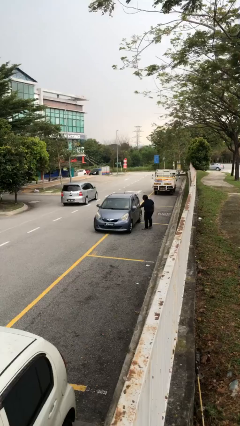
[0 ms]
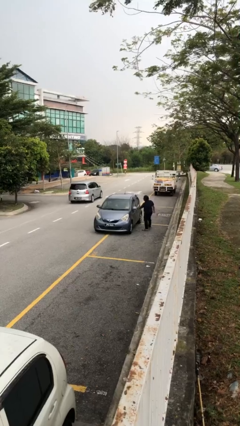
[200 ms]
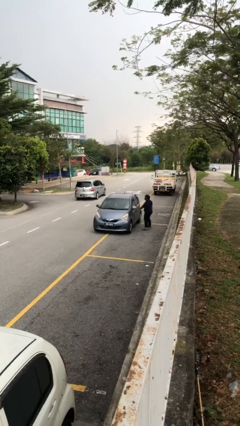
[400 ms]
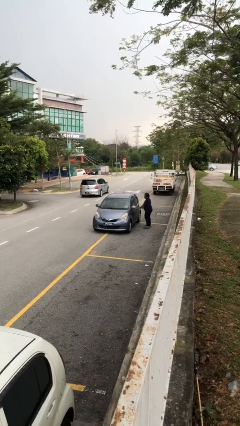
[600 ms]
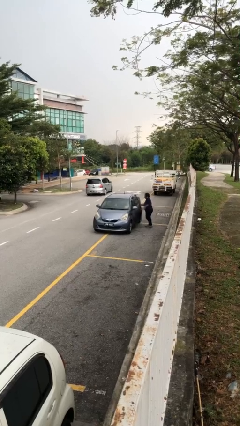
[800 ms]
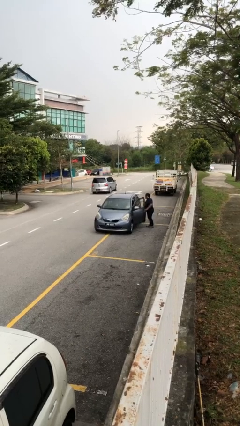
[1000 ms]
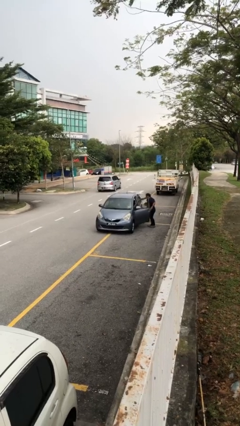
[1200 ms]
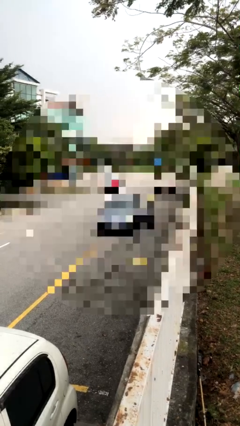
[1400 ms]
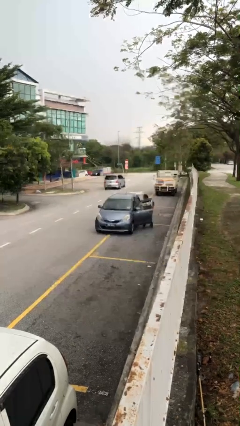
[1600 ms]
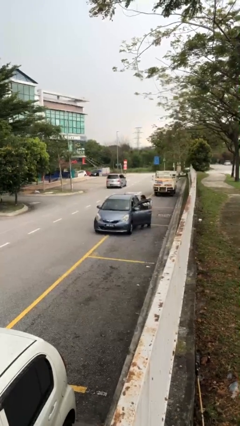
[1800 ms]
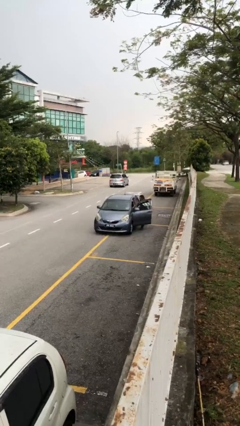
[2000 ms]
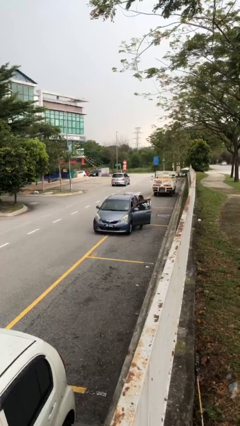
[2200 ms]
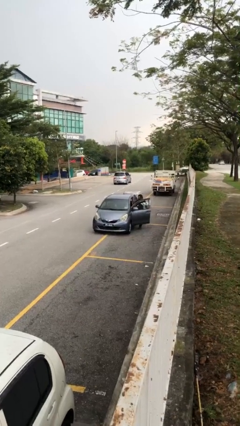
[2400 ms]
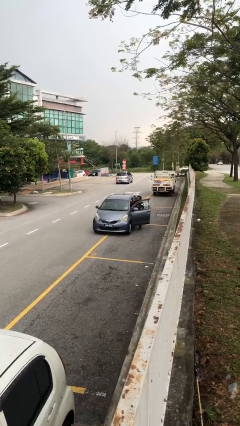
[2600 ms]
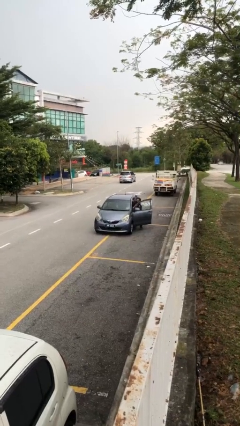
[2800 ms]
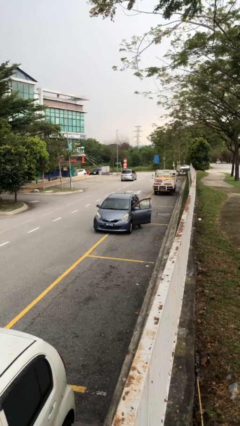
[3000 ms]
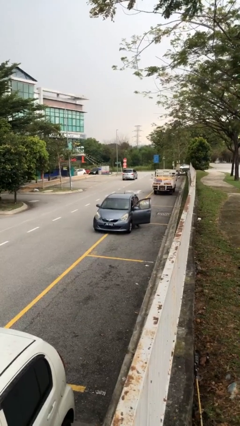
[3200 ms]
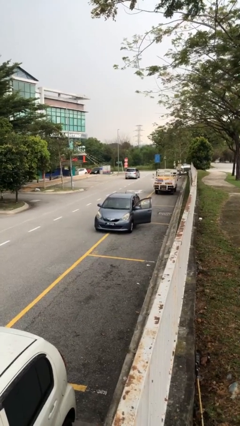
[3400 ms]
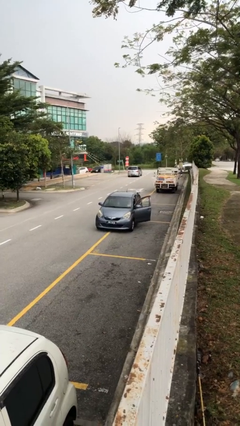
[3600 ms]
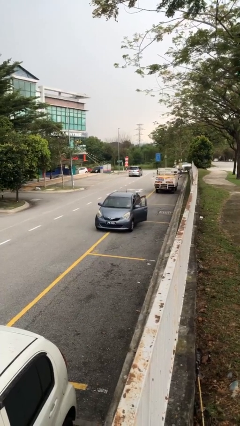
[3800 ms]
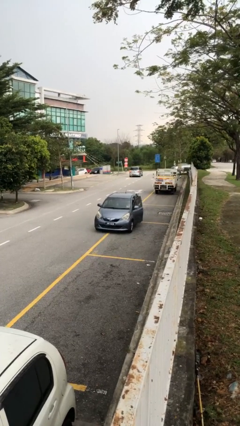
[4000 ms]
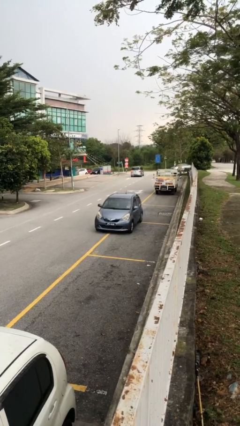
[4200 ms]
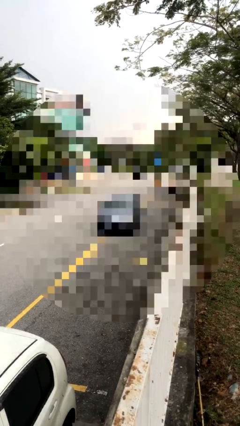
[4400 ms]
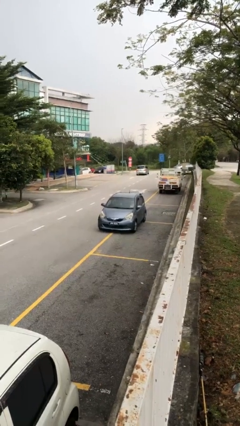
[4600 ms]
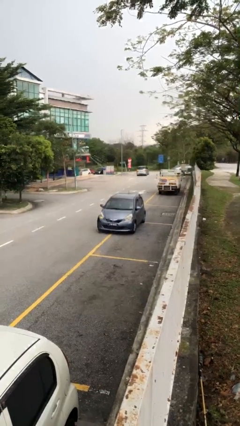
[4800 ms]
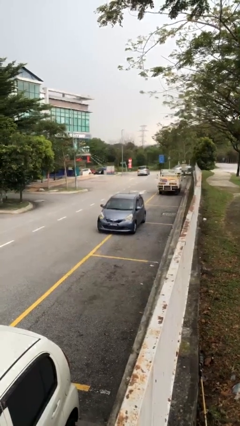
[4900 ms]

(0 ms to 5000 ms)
car picks up person

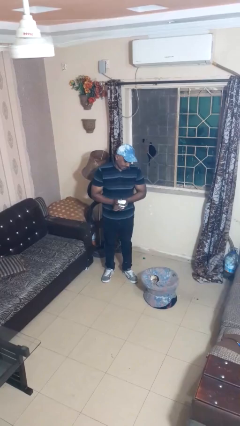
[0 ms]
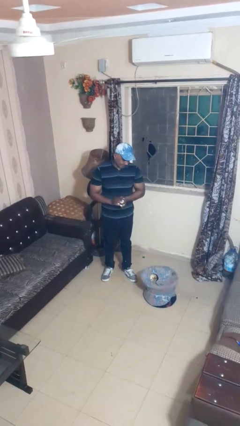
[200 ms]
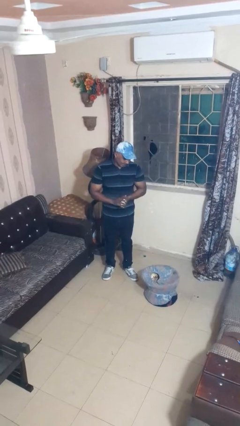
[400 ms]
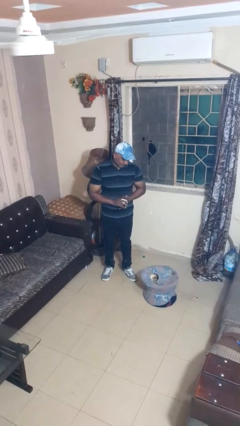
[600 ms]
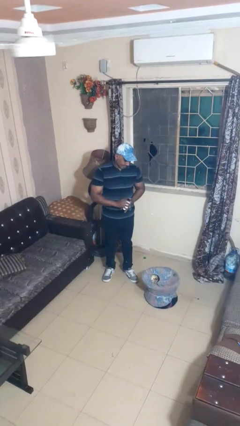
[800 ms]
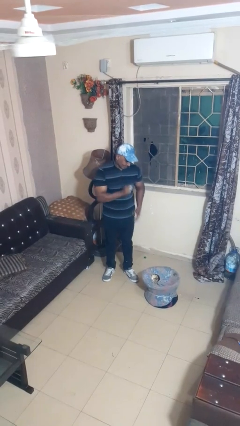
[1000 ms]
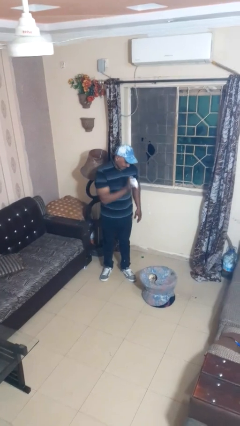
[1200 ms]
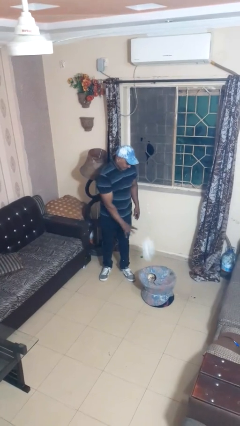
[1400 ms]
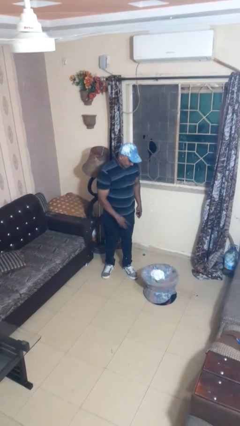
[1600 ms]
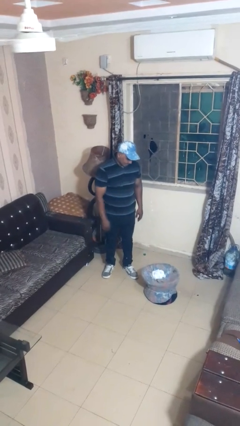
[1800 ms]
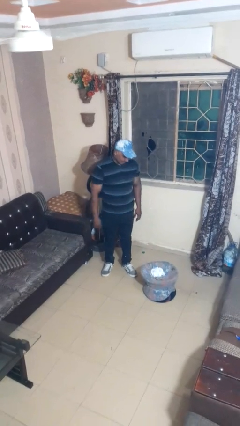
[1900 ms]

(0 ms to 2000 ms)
person puts object into basket

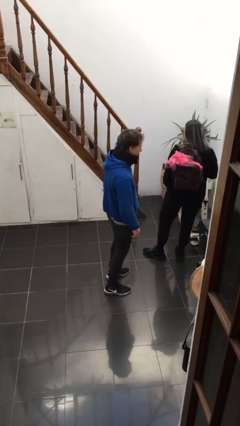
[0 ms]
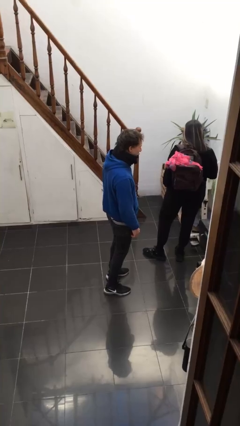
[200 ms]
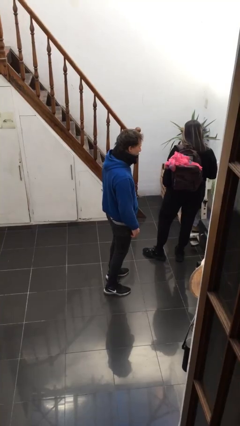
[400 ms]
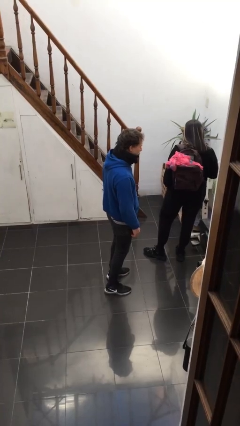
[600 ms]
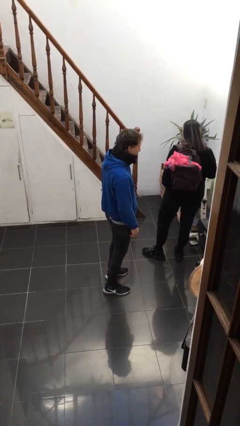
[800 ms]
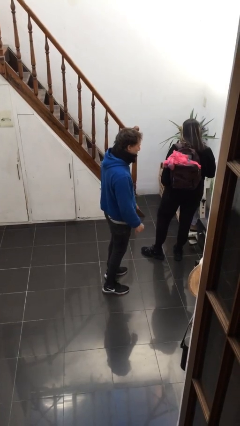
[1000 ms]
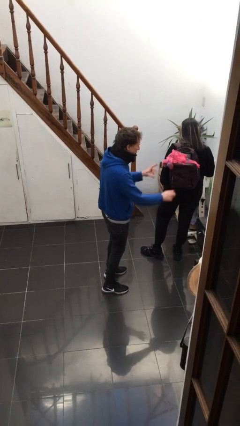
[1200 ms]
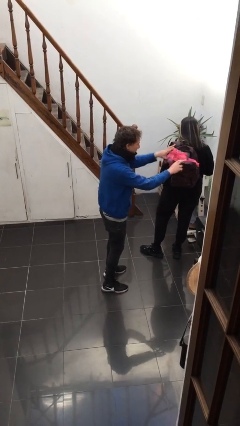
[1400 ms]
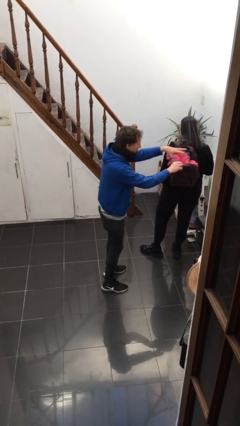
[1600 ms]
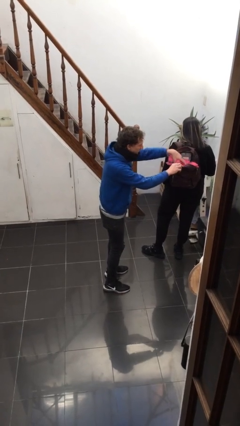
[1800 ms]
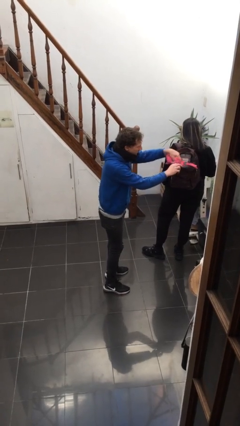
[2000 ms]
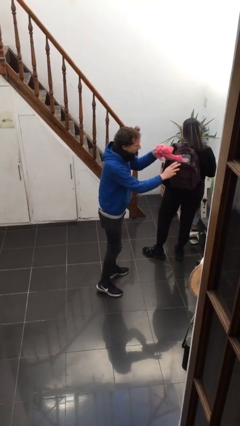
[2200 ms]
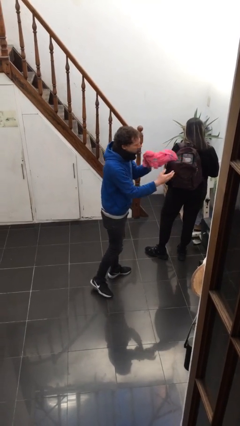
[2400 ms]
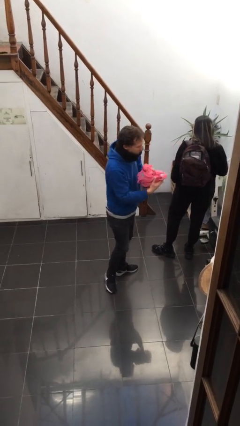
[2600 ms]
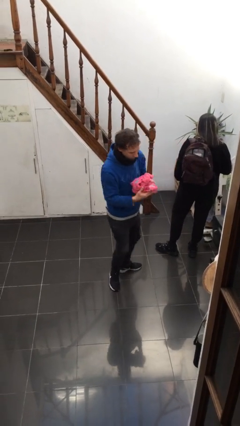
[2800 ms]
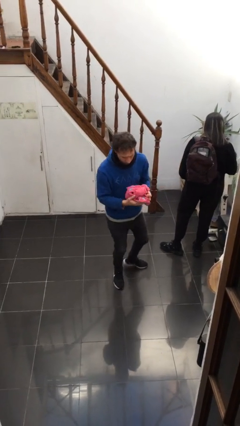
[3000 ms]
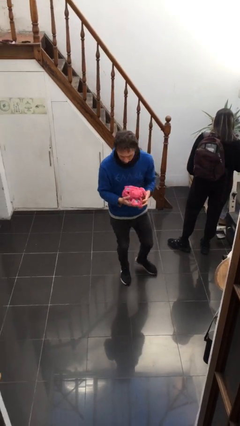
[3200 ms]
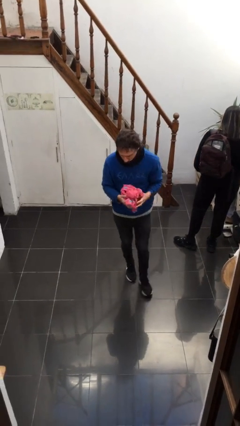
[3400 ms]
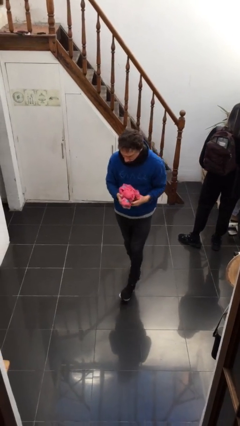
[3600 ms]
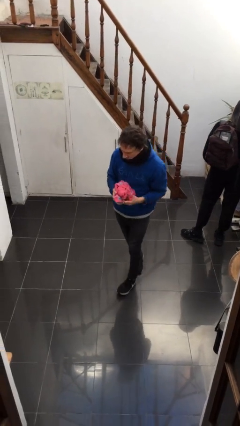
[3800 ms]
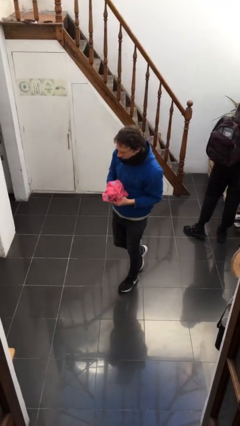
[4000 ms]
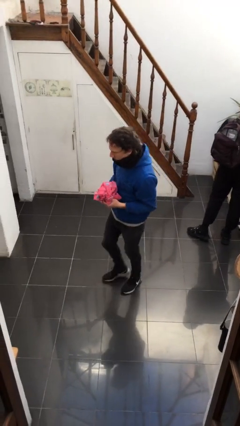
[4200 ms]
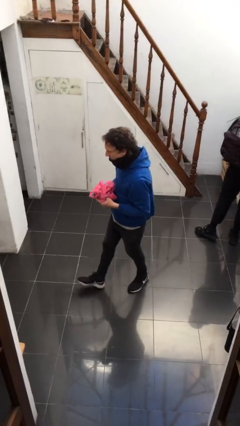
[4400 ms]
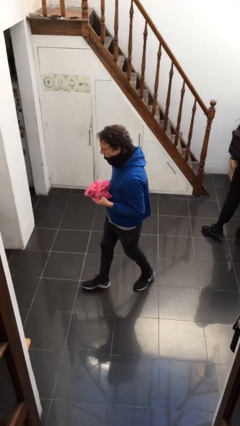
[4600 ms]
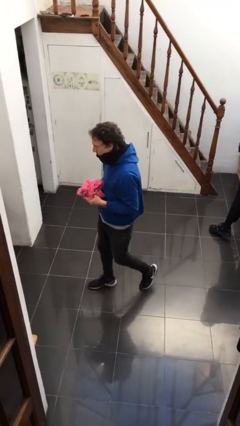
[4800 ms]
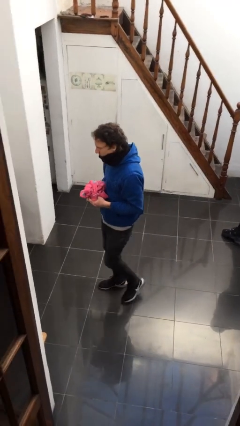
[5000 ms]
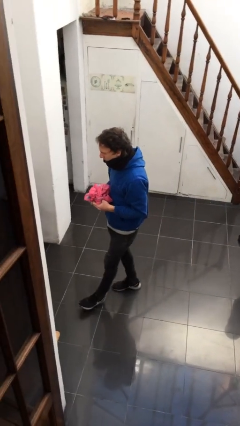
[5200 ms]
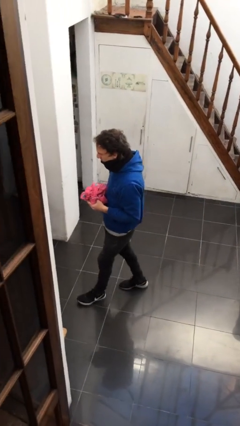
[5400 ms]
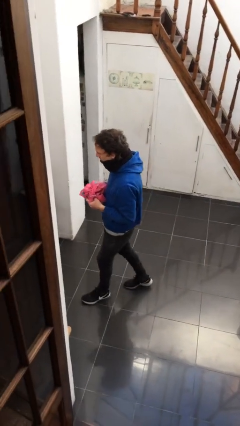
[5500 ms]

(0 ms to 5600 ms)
person steals object from person

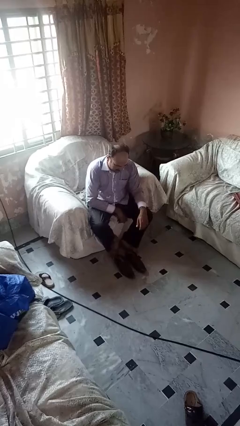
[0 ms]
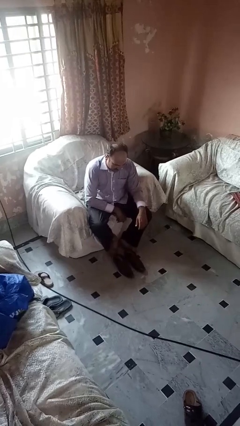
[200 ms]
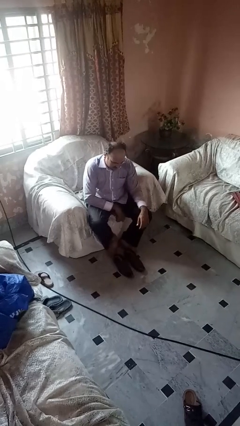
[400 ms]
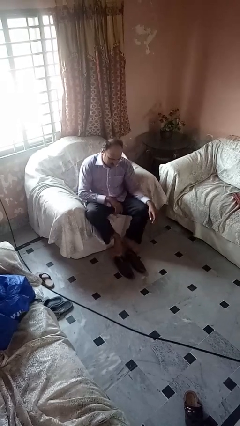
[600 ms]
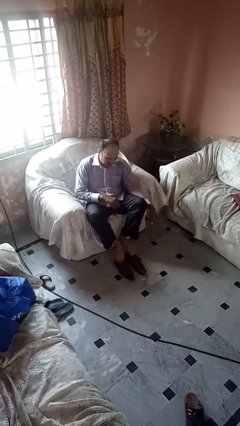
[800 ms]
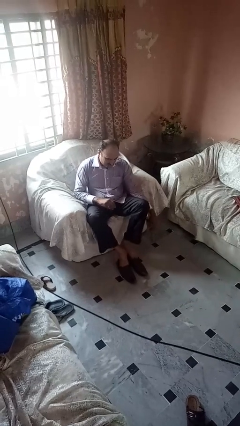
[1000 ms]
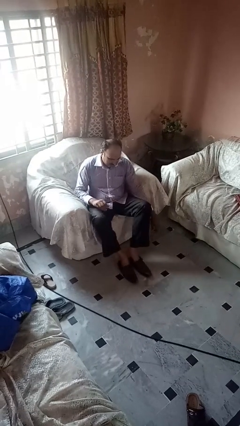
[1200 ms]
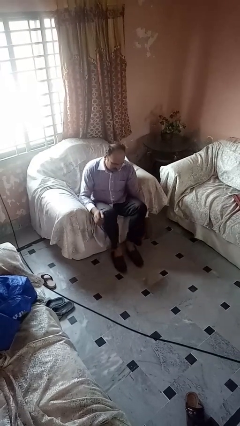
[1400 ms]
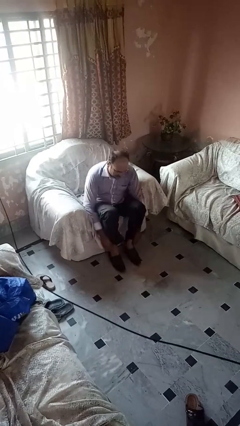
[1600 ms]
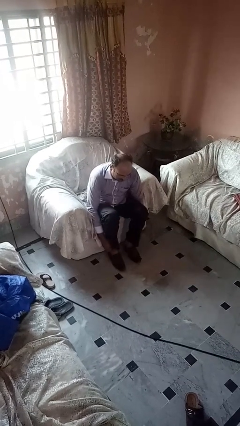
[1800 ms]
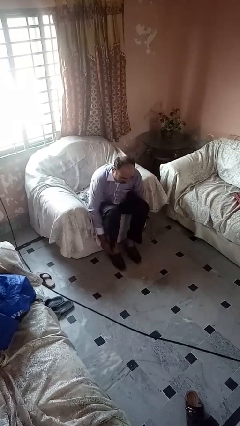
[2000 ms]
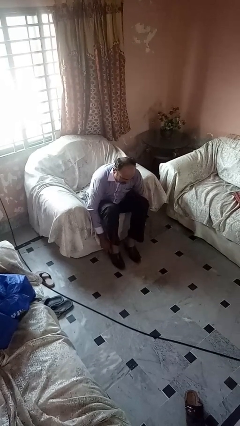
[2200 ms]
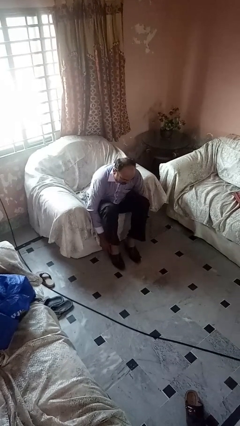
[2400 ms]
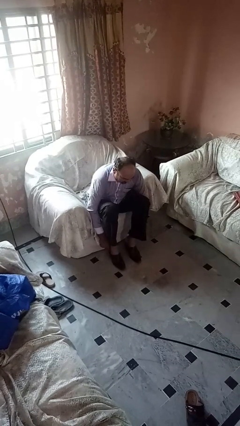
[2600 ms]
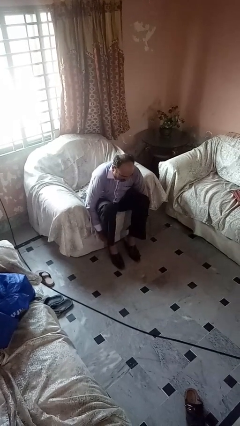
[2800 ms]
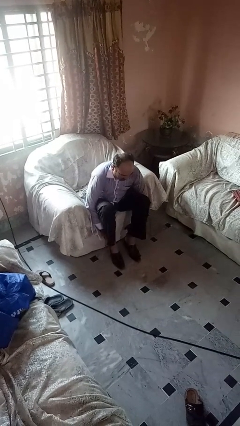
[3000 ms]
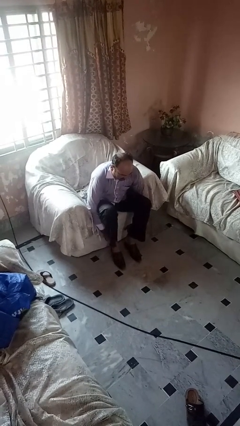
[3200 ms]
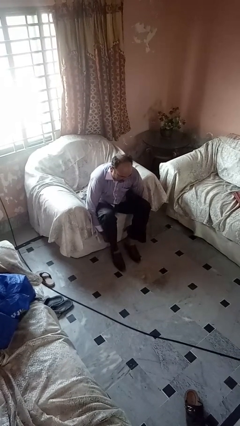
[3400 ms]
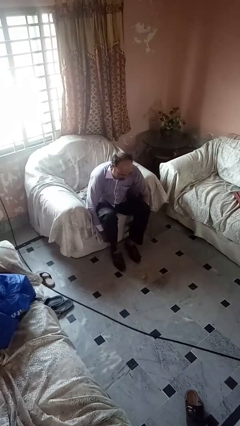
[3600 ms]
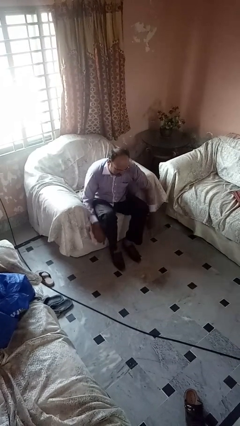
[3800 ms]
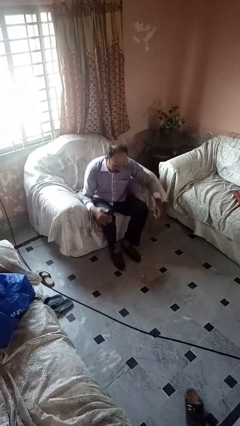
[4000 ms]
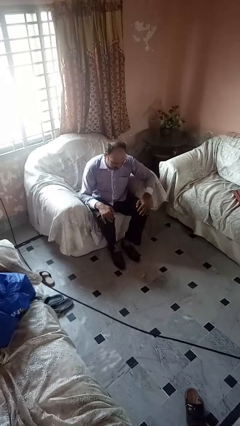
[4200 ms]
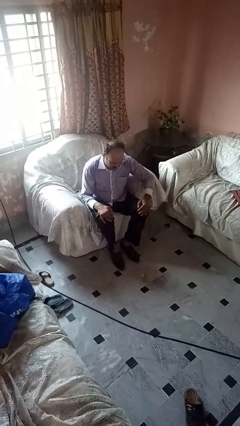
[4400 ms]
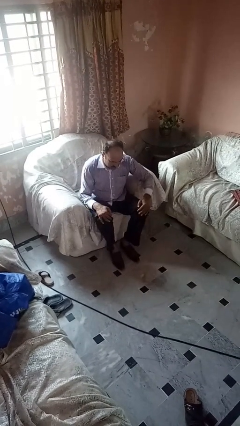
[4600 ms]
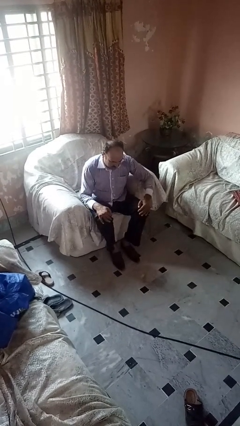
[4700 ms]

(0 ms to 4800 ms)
person puts on boots

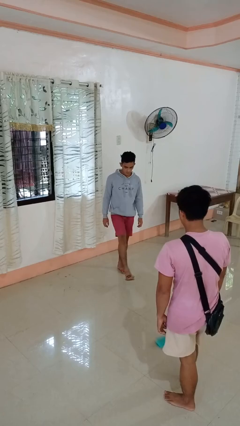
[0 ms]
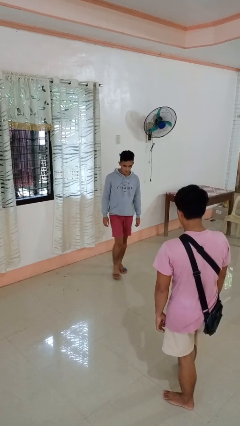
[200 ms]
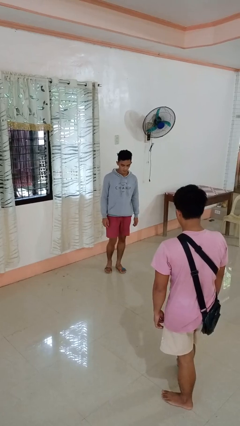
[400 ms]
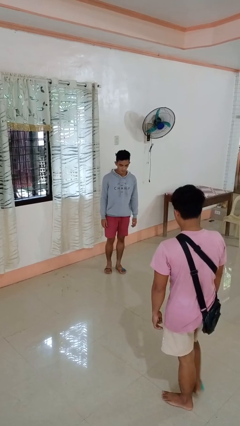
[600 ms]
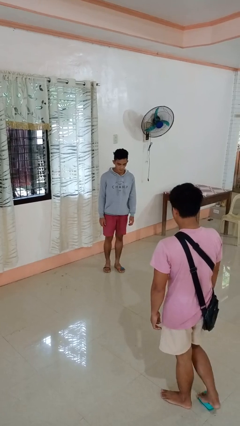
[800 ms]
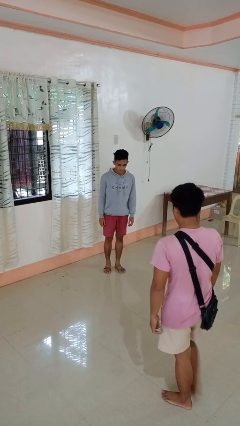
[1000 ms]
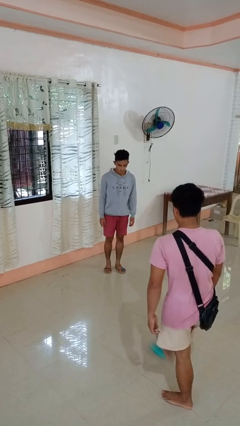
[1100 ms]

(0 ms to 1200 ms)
person kicks object to person
